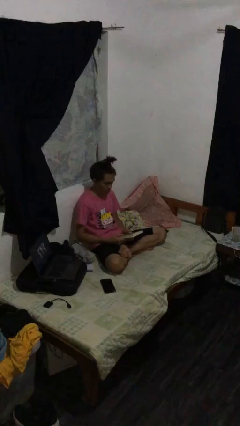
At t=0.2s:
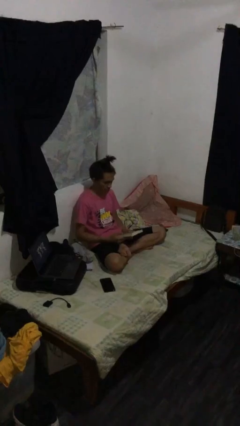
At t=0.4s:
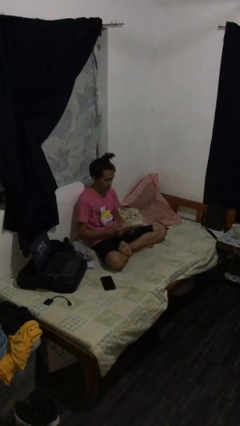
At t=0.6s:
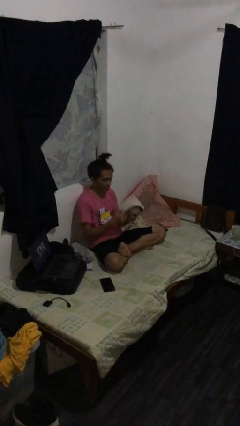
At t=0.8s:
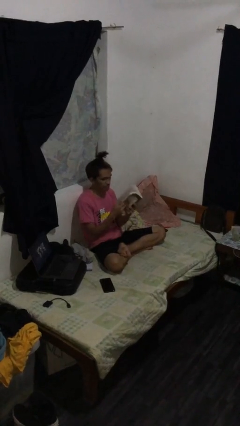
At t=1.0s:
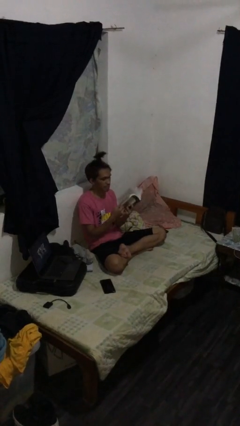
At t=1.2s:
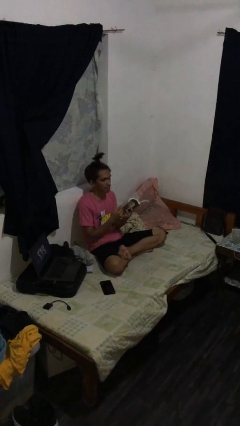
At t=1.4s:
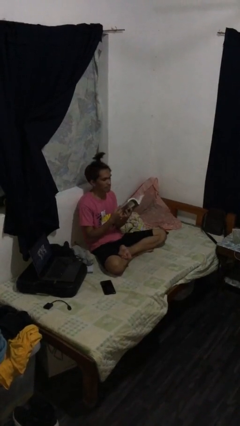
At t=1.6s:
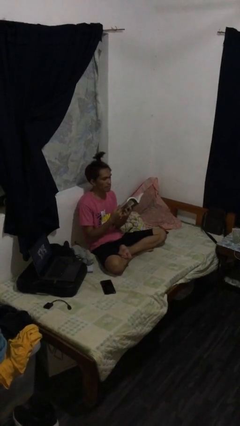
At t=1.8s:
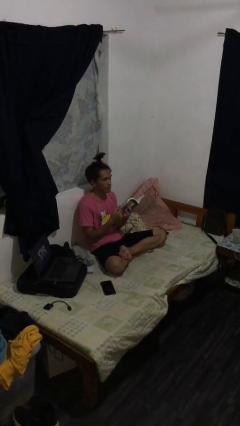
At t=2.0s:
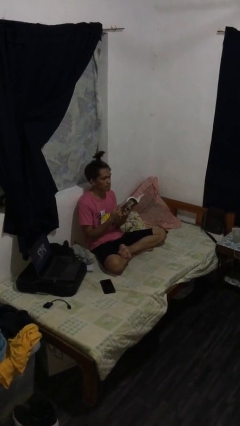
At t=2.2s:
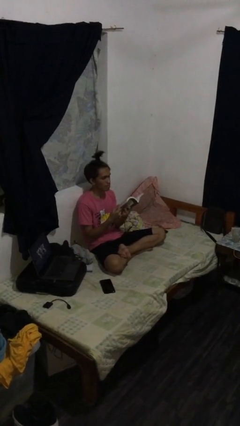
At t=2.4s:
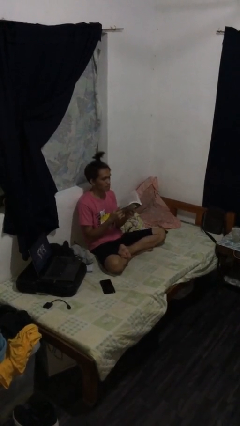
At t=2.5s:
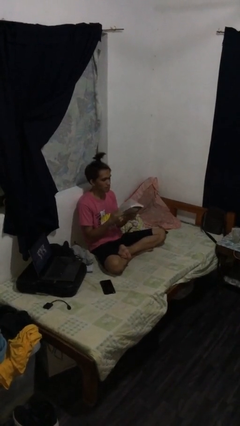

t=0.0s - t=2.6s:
person reads document

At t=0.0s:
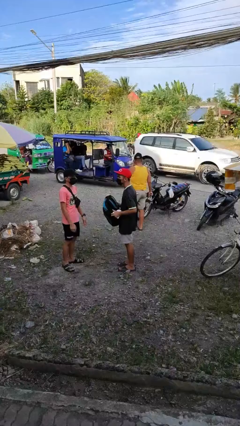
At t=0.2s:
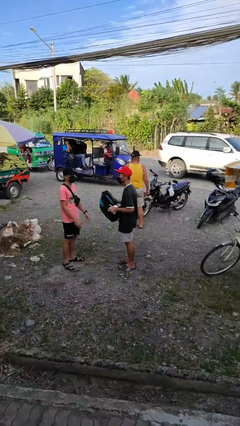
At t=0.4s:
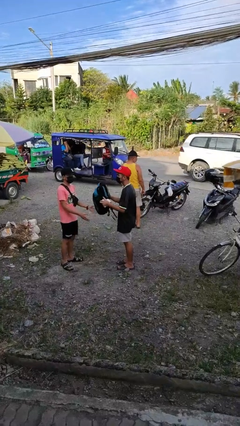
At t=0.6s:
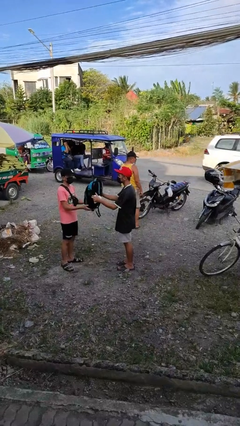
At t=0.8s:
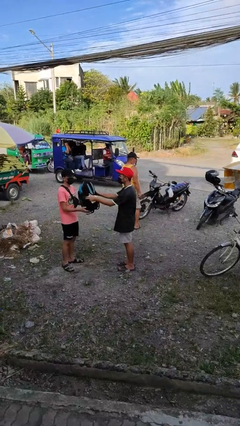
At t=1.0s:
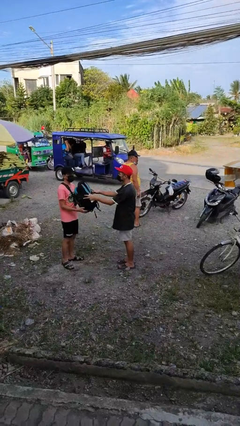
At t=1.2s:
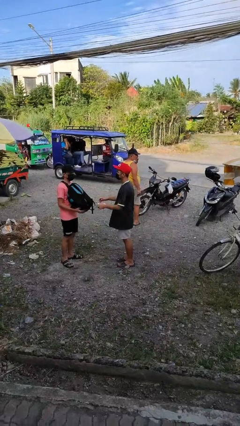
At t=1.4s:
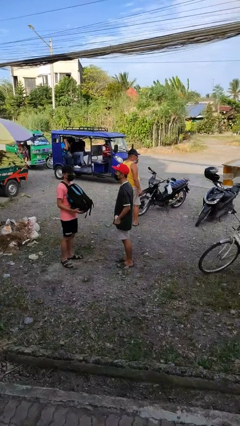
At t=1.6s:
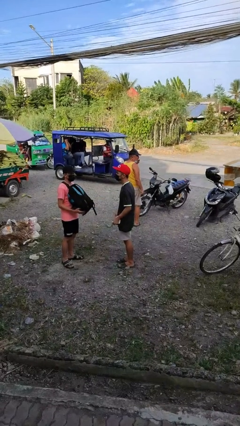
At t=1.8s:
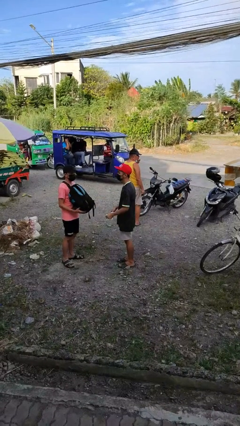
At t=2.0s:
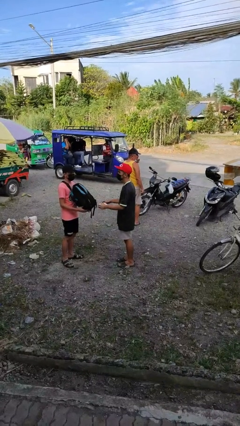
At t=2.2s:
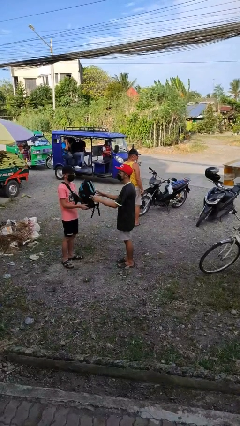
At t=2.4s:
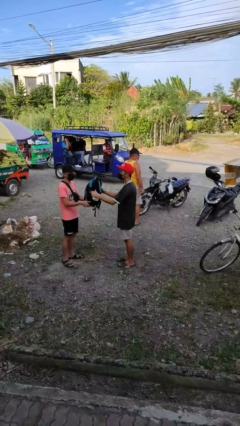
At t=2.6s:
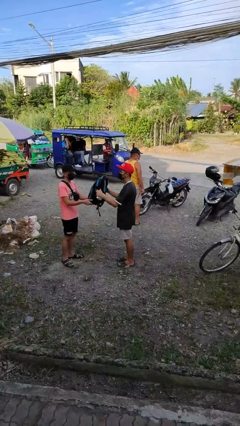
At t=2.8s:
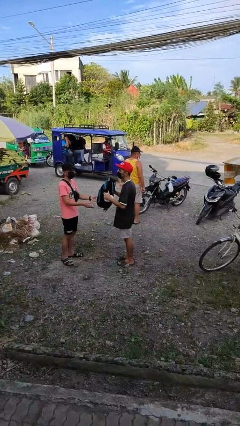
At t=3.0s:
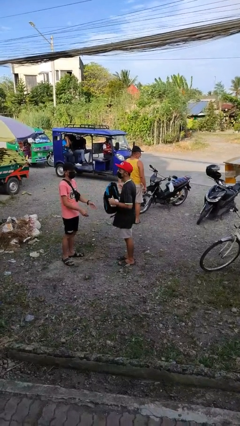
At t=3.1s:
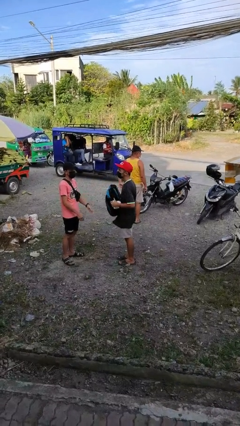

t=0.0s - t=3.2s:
person transfers object to person

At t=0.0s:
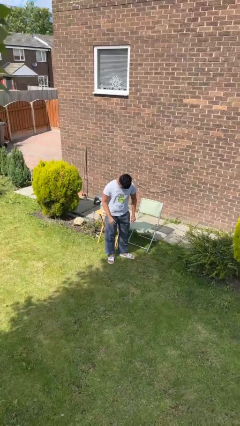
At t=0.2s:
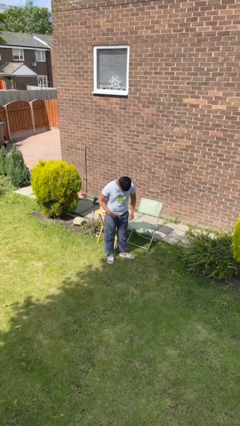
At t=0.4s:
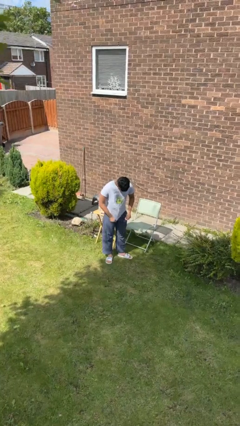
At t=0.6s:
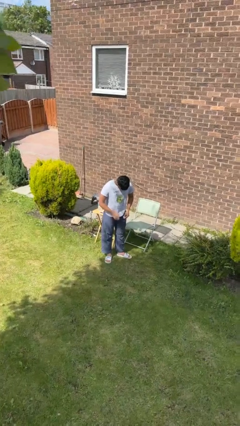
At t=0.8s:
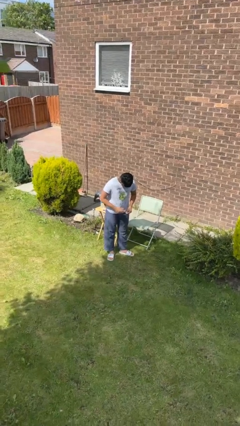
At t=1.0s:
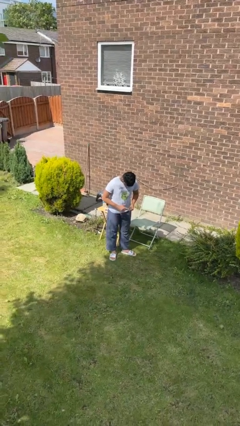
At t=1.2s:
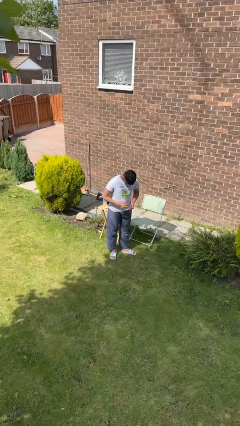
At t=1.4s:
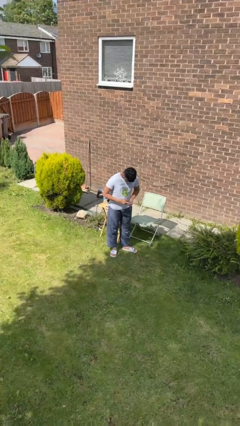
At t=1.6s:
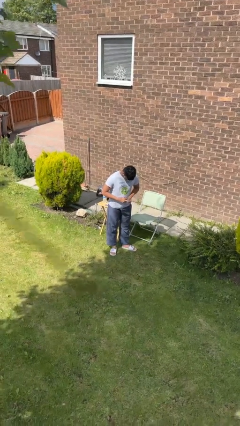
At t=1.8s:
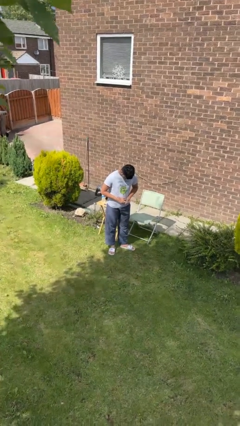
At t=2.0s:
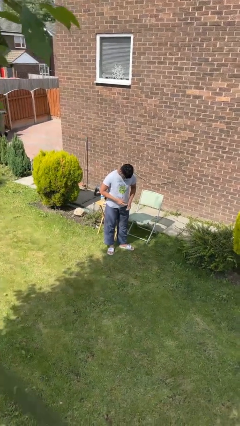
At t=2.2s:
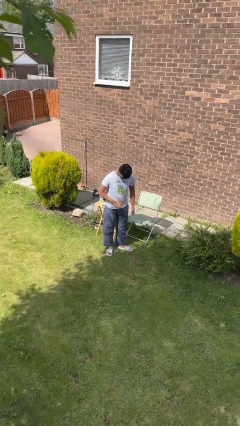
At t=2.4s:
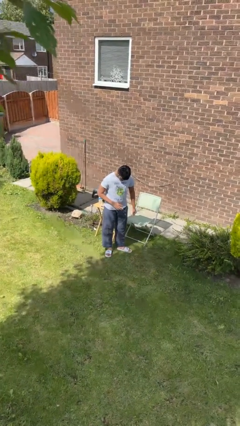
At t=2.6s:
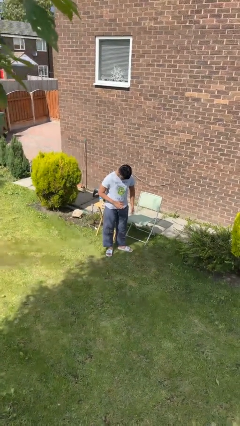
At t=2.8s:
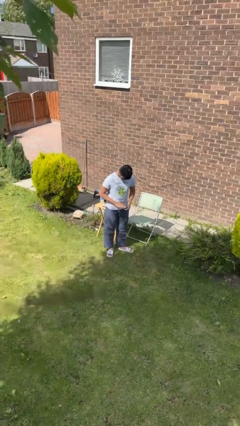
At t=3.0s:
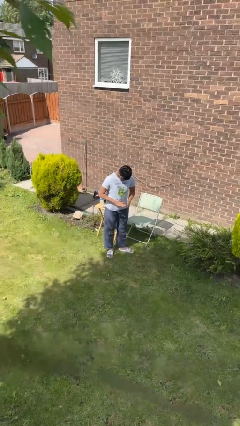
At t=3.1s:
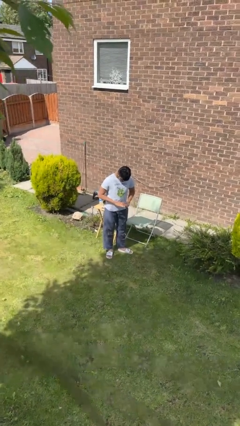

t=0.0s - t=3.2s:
person puts on ring

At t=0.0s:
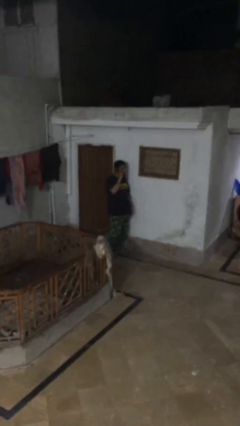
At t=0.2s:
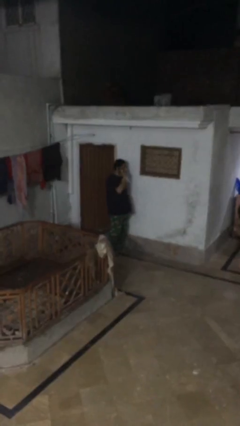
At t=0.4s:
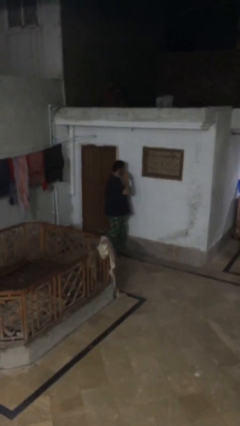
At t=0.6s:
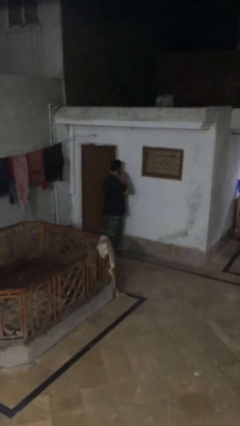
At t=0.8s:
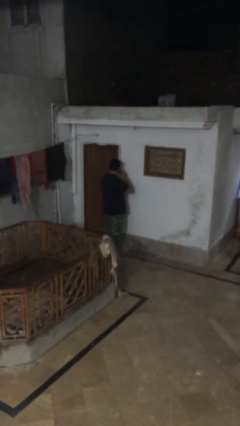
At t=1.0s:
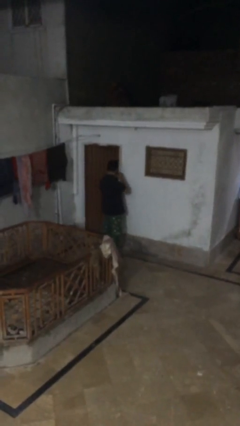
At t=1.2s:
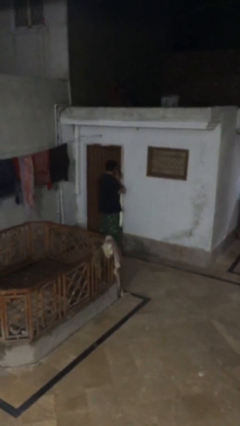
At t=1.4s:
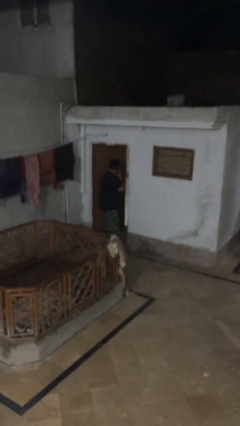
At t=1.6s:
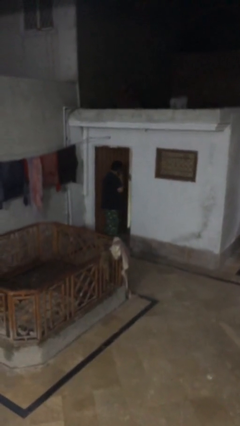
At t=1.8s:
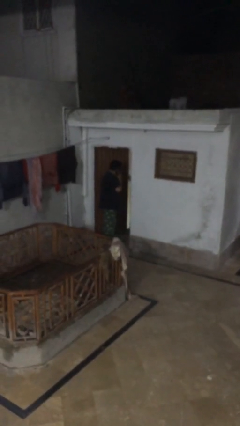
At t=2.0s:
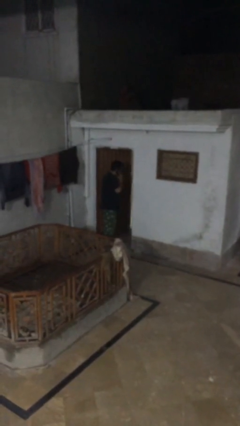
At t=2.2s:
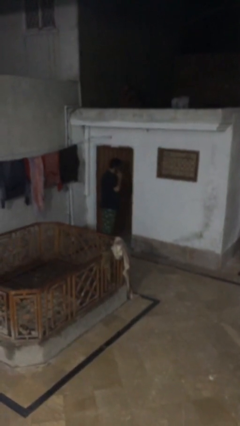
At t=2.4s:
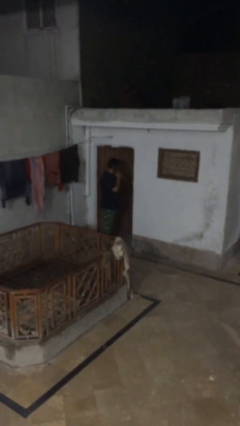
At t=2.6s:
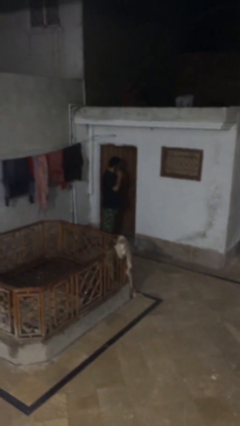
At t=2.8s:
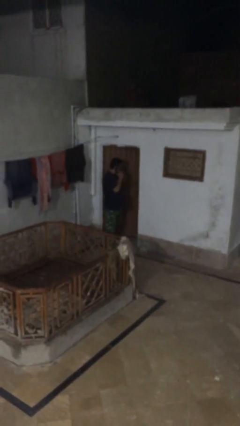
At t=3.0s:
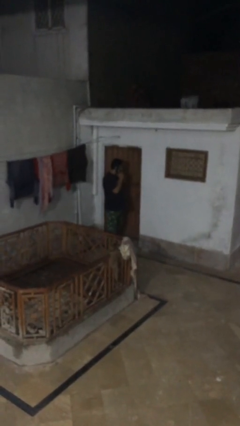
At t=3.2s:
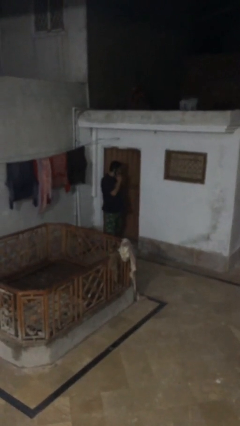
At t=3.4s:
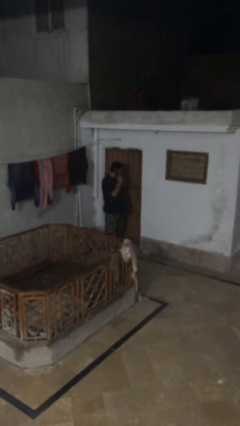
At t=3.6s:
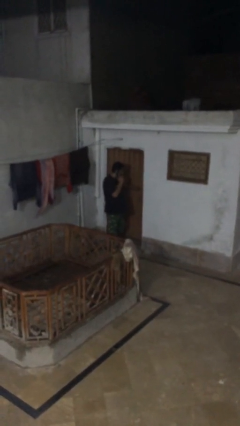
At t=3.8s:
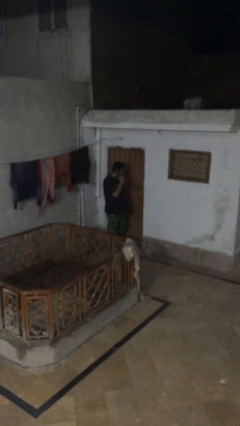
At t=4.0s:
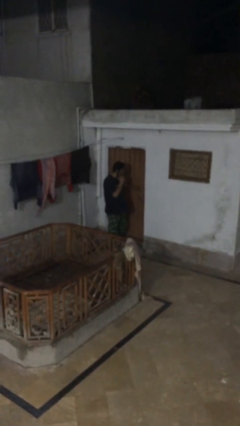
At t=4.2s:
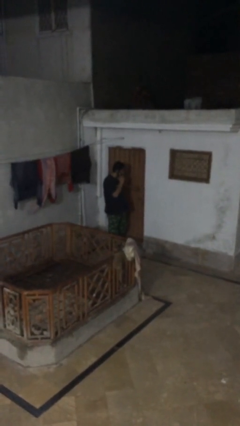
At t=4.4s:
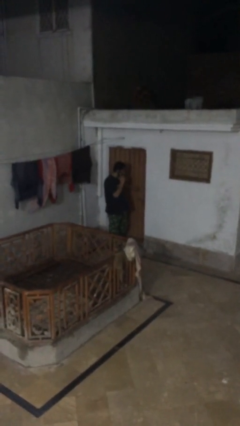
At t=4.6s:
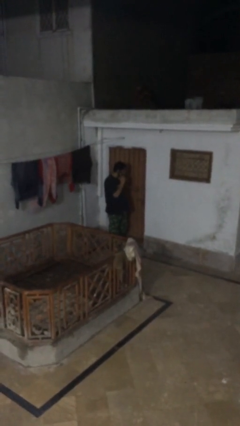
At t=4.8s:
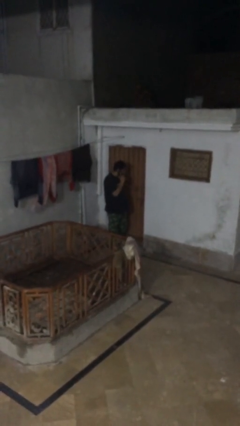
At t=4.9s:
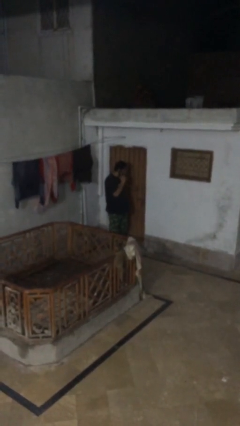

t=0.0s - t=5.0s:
person closes facility door

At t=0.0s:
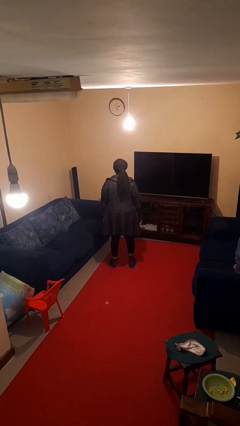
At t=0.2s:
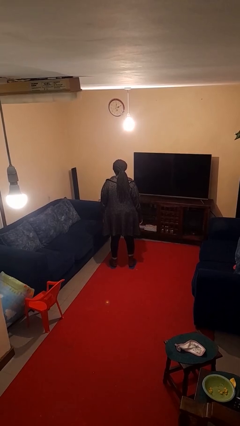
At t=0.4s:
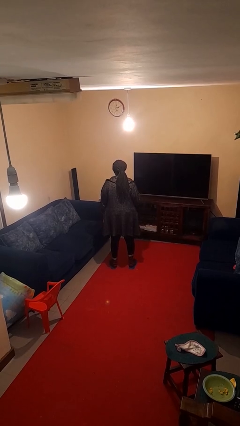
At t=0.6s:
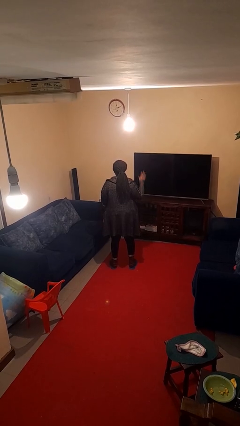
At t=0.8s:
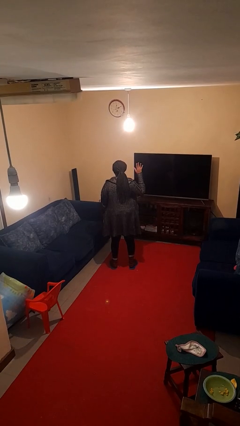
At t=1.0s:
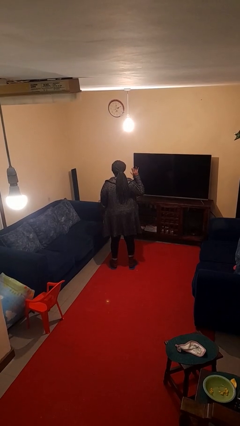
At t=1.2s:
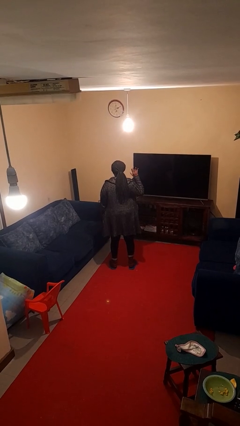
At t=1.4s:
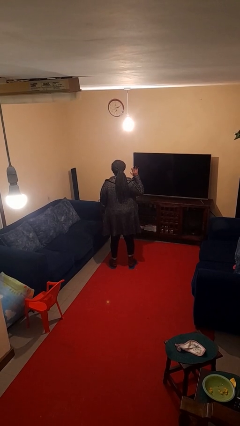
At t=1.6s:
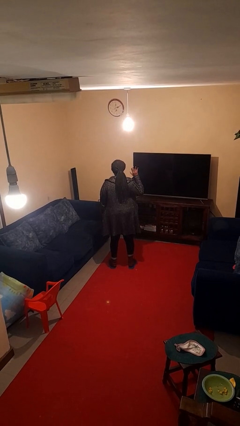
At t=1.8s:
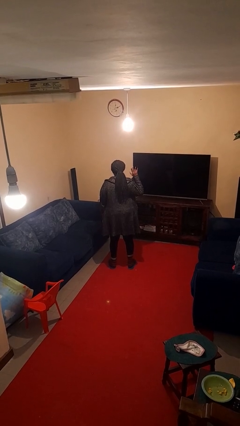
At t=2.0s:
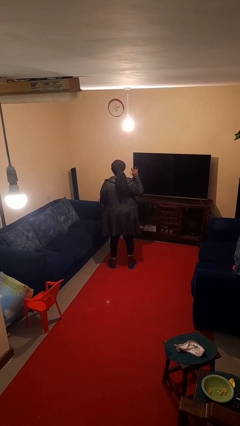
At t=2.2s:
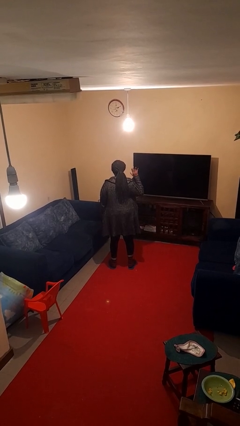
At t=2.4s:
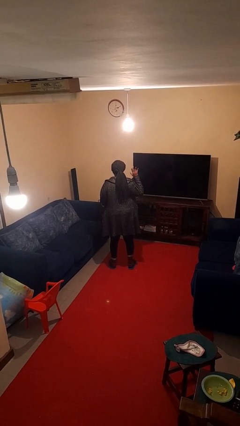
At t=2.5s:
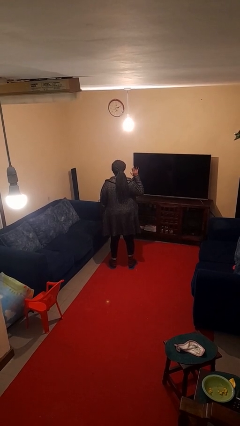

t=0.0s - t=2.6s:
person gestures number five

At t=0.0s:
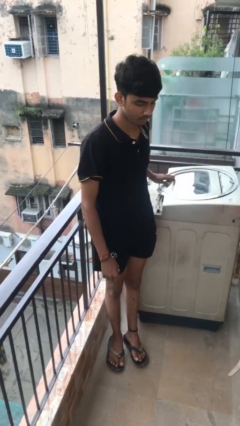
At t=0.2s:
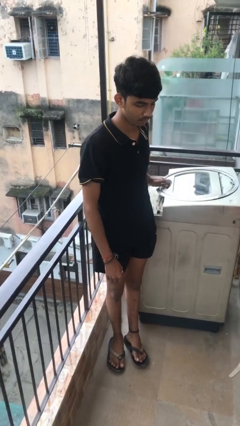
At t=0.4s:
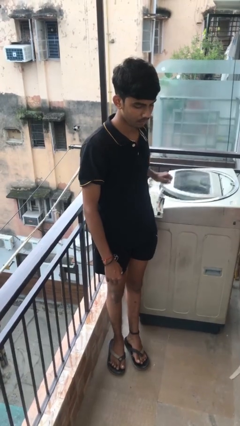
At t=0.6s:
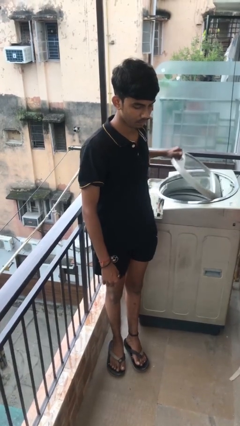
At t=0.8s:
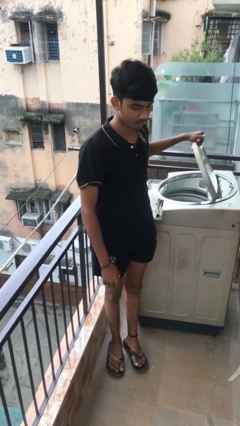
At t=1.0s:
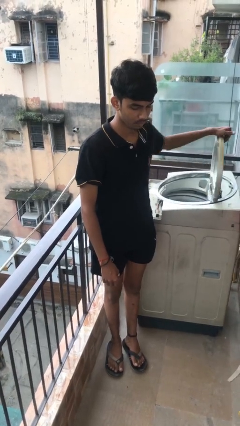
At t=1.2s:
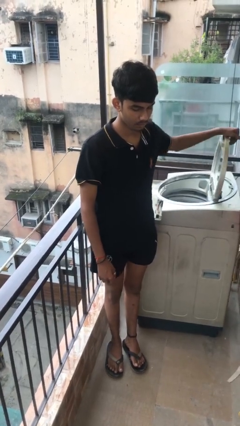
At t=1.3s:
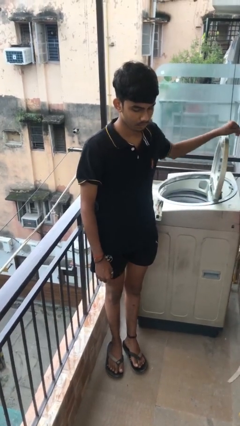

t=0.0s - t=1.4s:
person opens clothes washer
